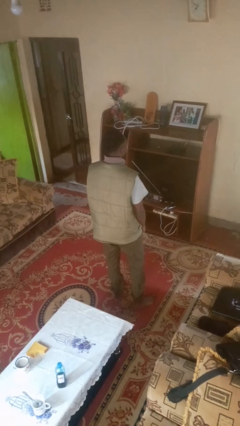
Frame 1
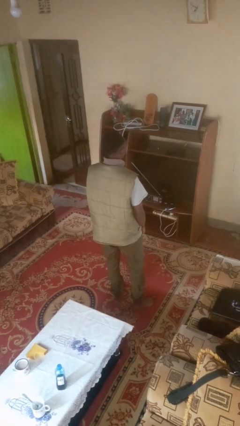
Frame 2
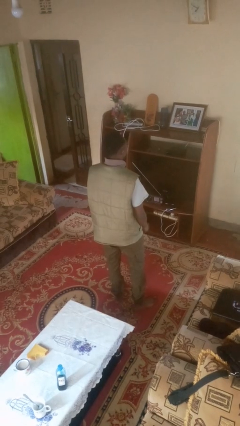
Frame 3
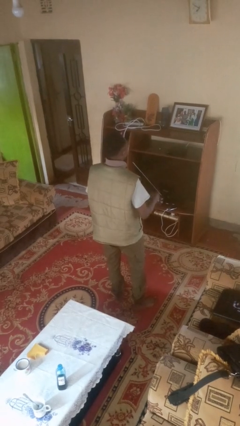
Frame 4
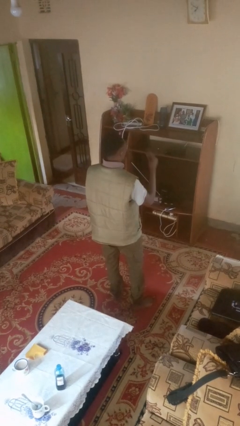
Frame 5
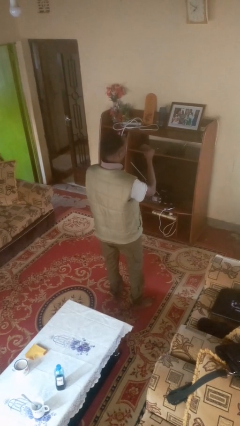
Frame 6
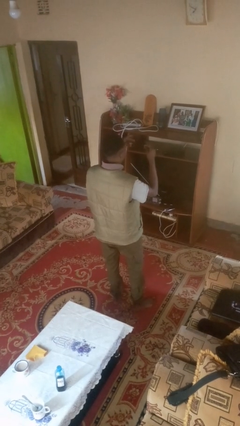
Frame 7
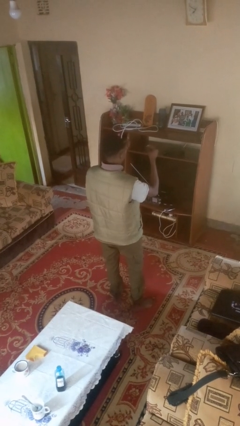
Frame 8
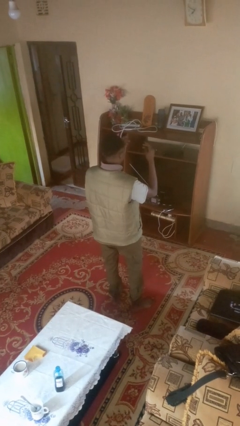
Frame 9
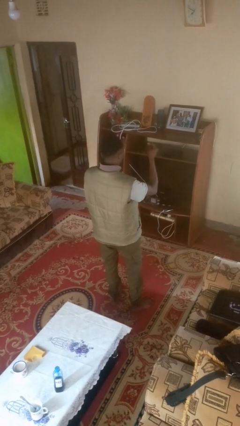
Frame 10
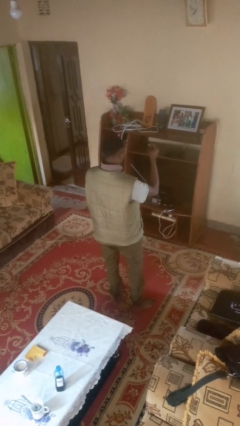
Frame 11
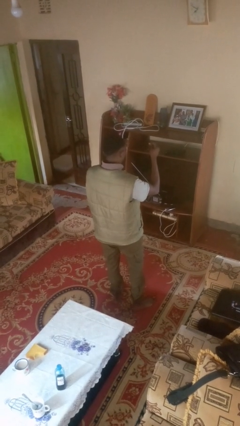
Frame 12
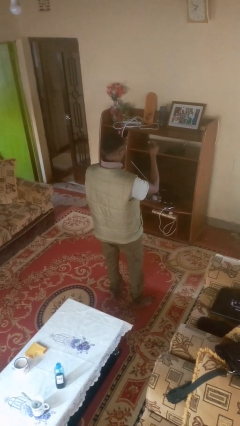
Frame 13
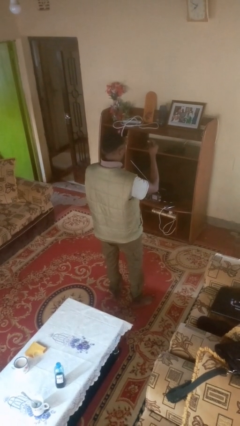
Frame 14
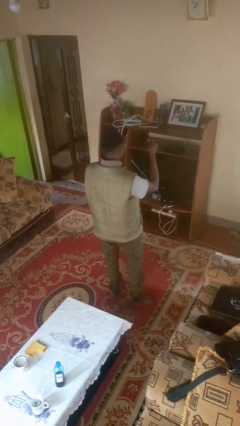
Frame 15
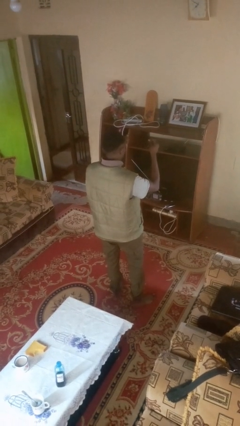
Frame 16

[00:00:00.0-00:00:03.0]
person snaps fingers

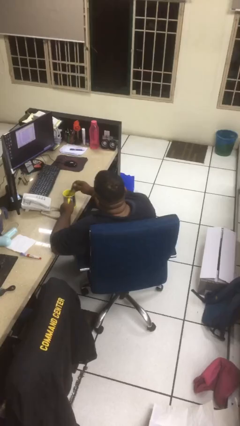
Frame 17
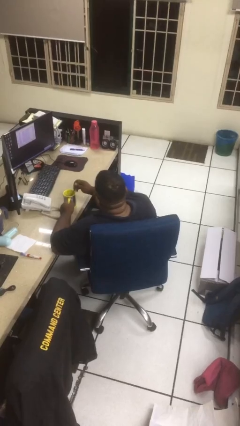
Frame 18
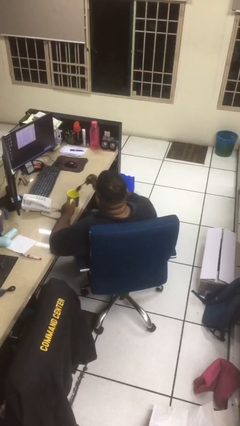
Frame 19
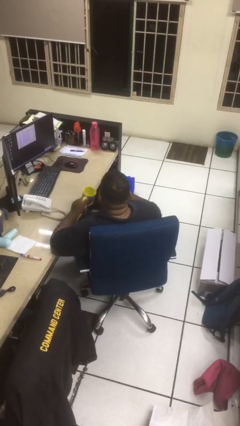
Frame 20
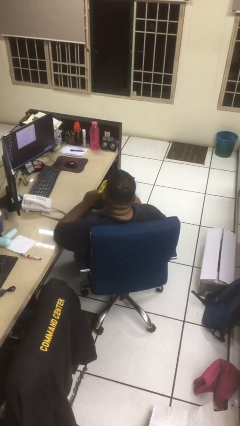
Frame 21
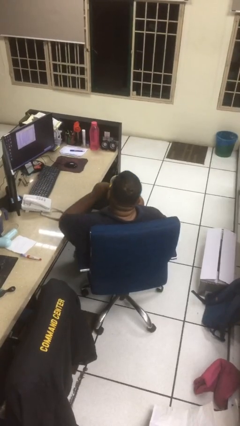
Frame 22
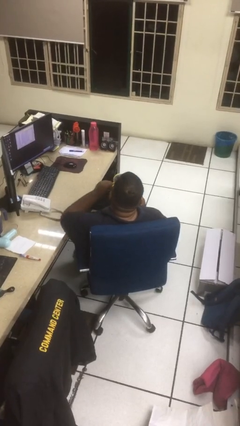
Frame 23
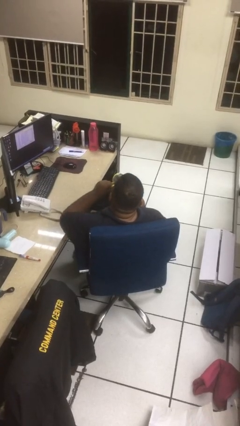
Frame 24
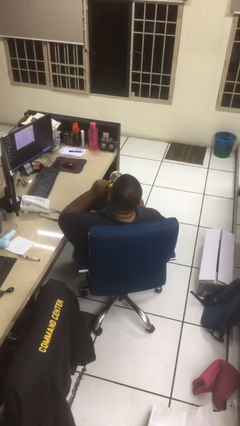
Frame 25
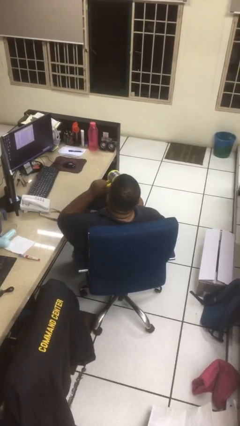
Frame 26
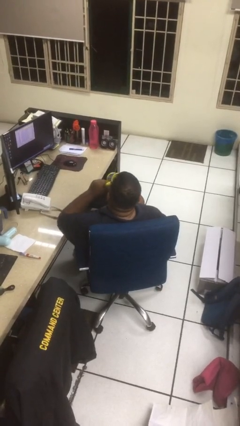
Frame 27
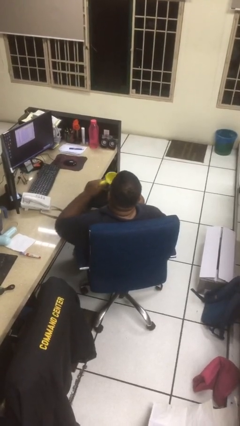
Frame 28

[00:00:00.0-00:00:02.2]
person drinks from mug

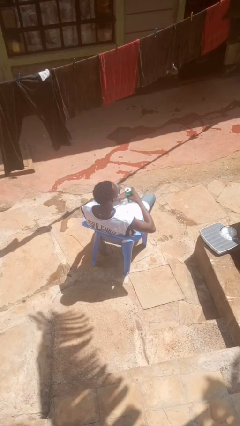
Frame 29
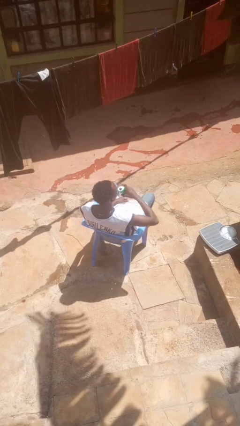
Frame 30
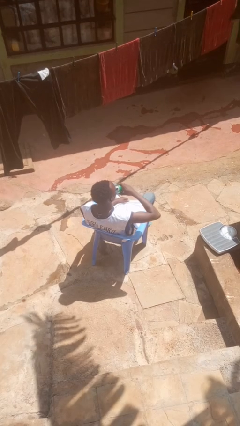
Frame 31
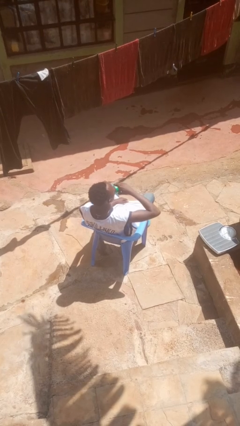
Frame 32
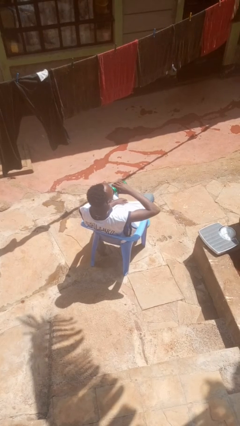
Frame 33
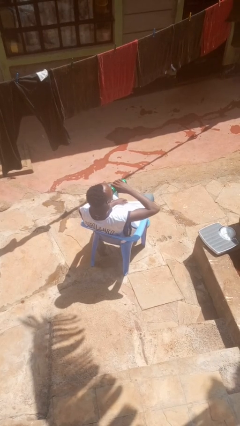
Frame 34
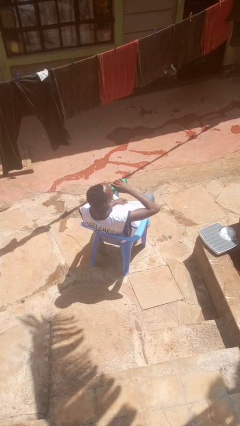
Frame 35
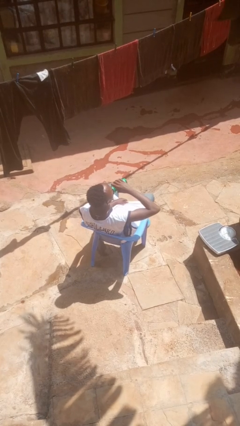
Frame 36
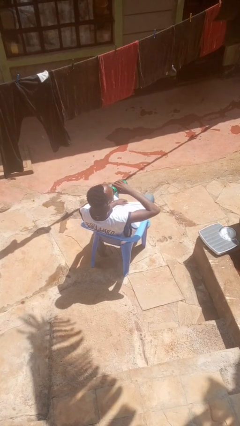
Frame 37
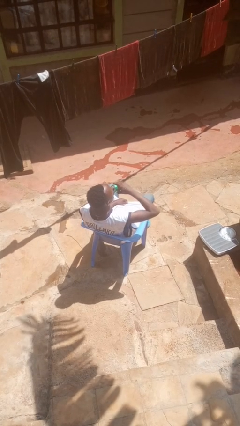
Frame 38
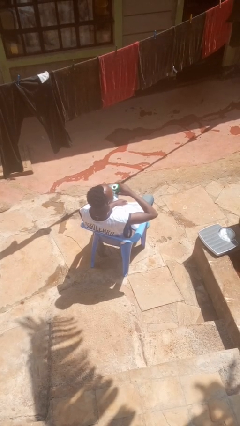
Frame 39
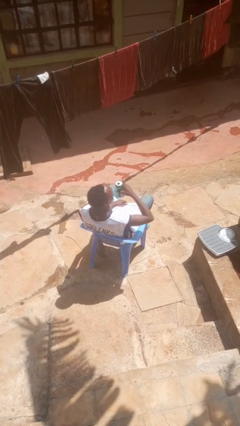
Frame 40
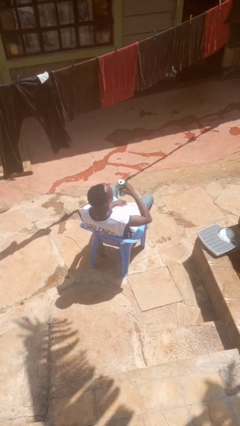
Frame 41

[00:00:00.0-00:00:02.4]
person drinks from beverage can

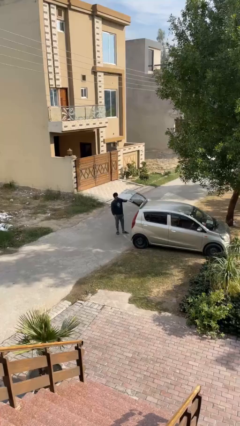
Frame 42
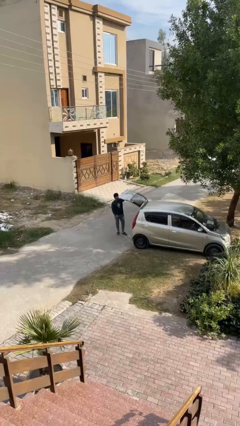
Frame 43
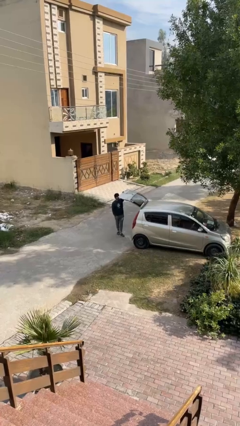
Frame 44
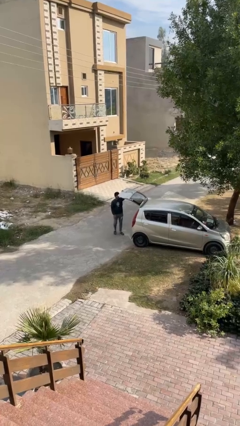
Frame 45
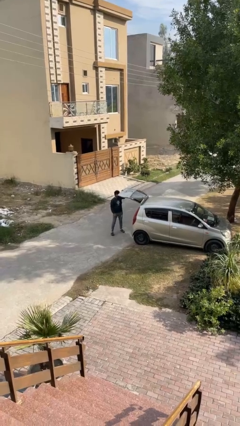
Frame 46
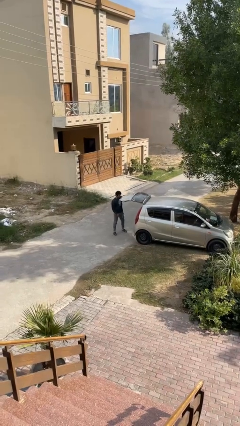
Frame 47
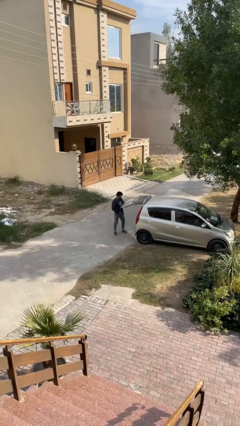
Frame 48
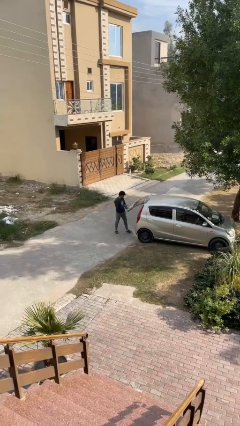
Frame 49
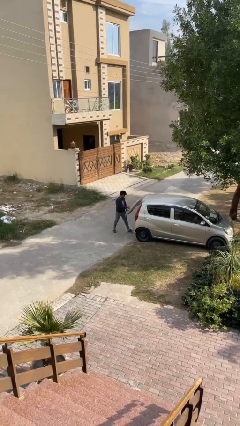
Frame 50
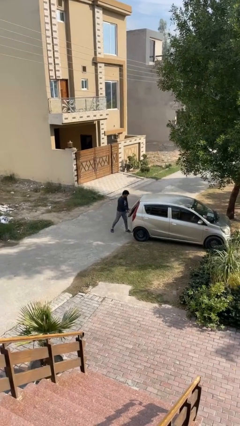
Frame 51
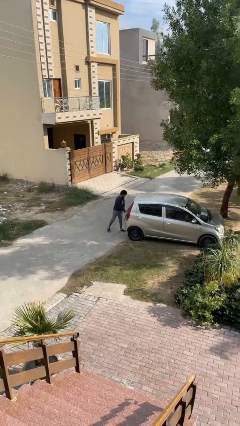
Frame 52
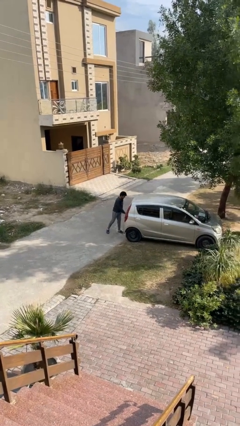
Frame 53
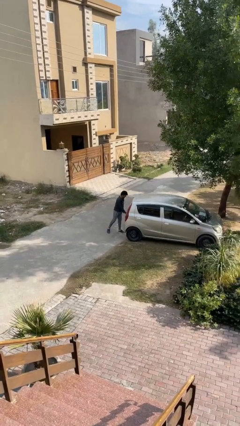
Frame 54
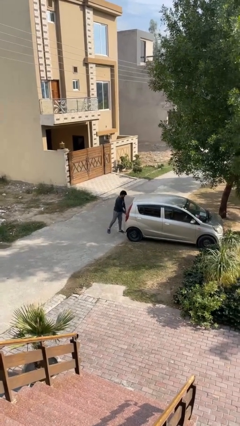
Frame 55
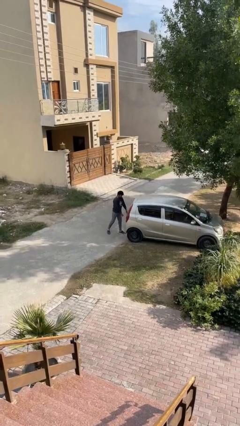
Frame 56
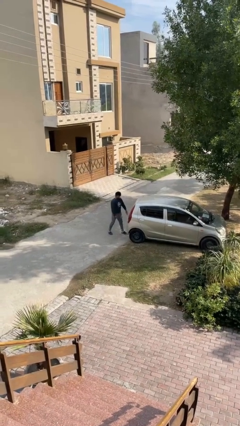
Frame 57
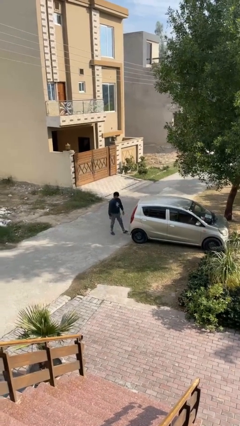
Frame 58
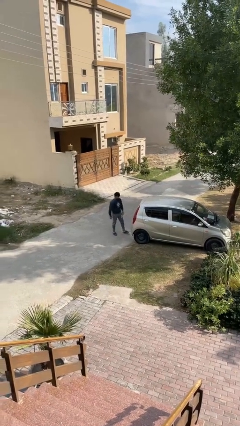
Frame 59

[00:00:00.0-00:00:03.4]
person closes car trunk

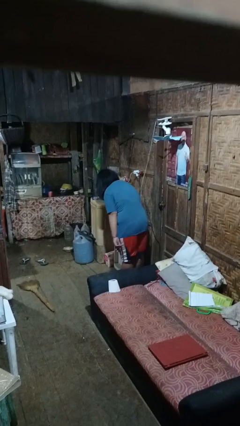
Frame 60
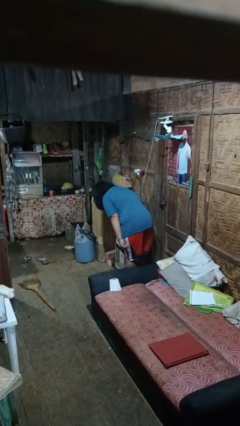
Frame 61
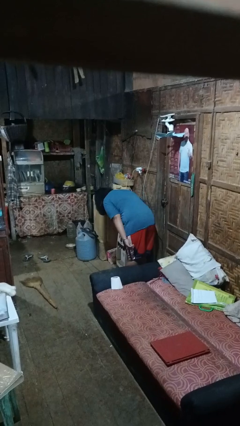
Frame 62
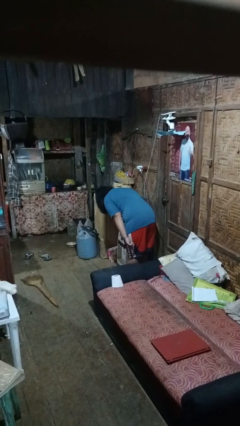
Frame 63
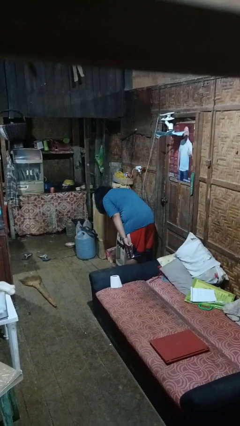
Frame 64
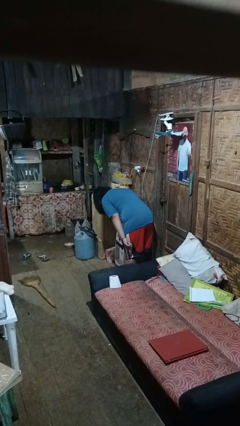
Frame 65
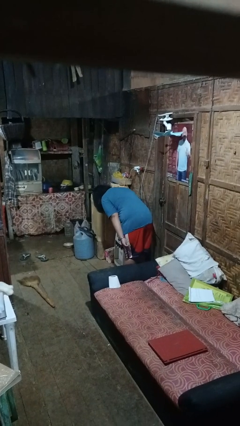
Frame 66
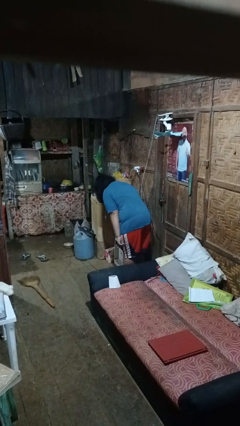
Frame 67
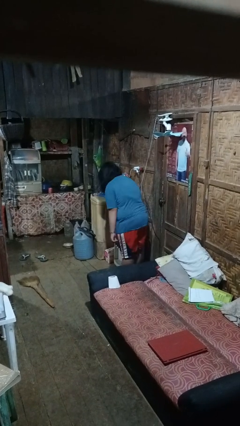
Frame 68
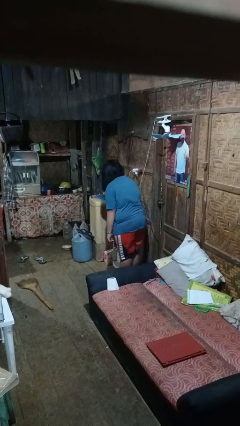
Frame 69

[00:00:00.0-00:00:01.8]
person bows

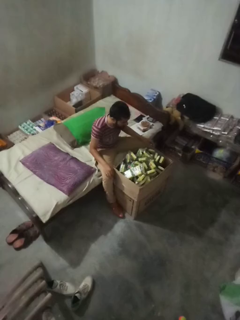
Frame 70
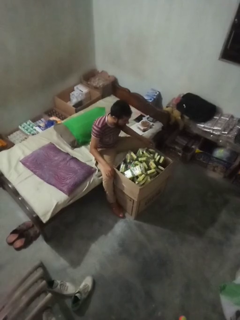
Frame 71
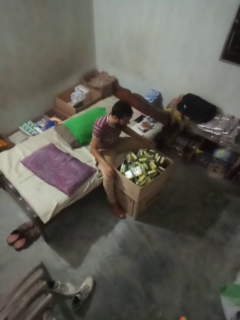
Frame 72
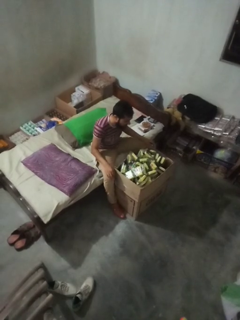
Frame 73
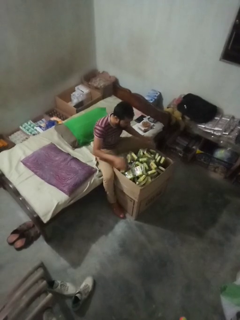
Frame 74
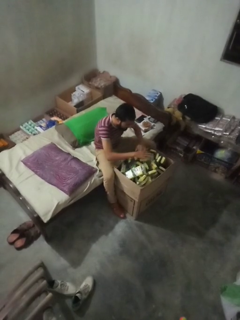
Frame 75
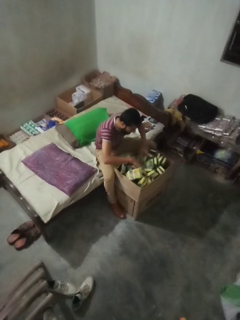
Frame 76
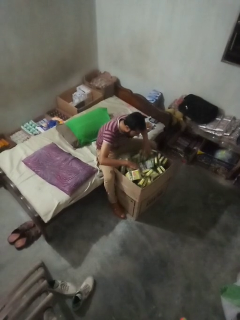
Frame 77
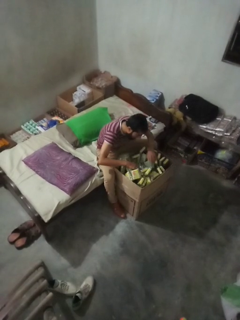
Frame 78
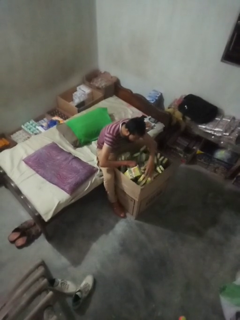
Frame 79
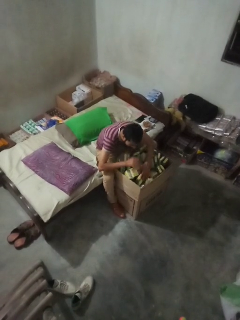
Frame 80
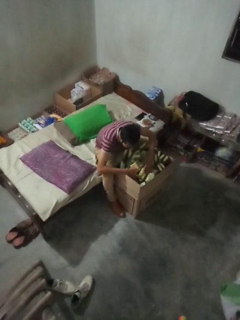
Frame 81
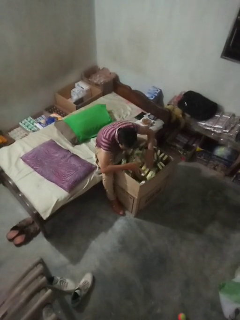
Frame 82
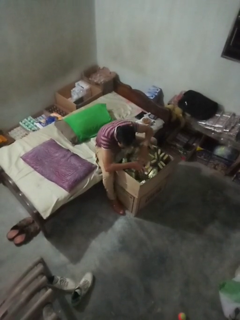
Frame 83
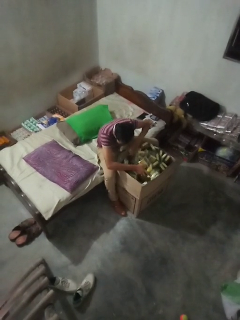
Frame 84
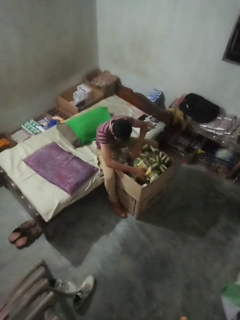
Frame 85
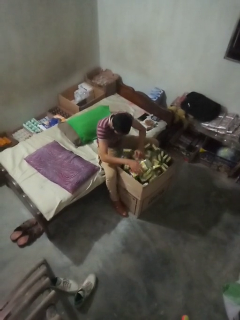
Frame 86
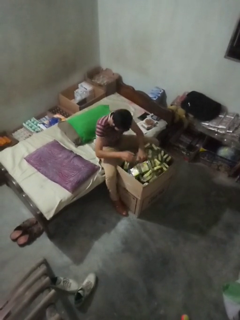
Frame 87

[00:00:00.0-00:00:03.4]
person searches in box

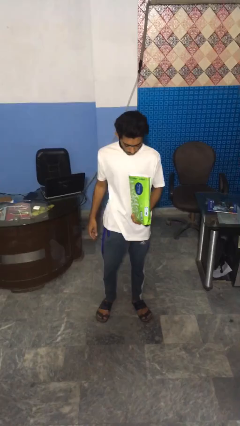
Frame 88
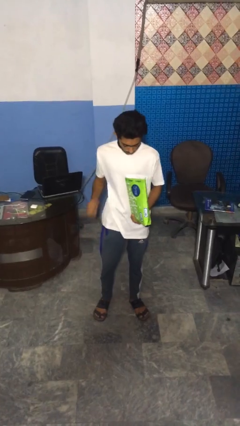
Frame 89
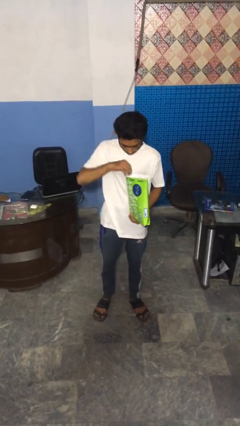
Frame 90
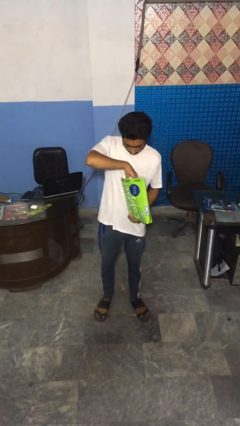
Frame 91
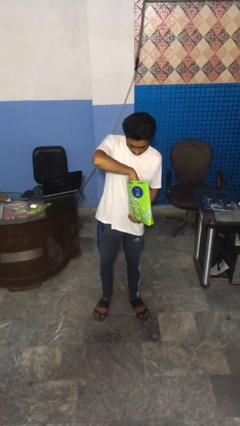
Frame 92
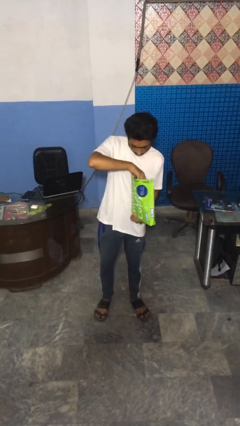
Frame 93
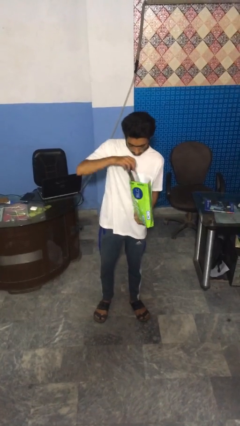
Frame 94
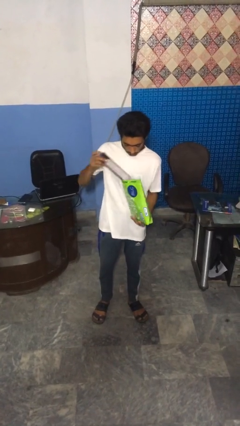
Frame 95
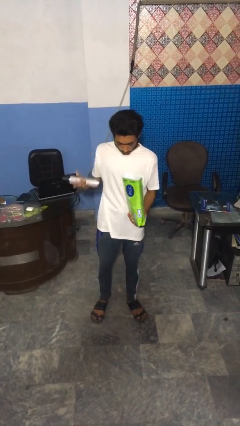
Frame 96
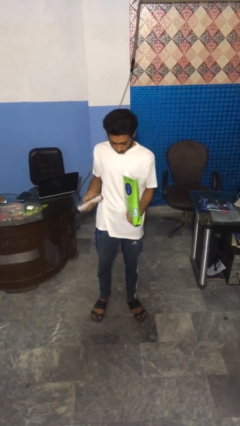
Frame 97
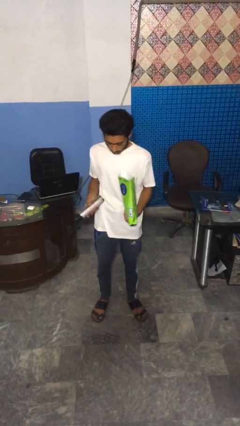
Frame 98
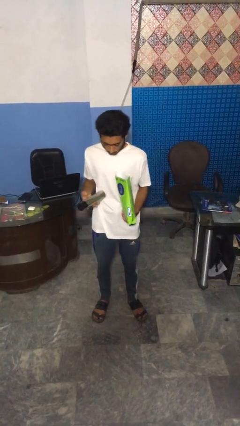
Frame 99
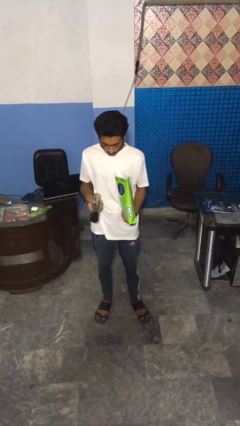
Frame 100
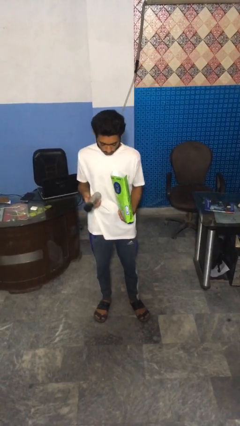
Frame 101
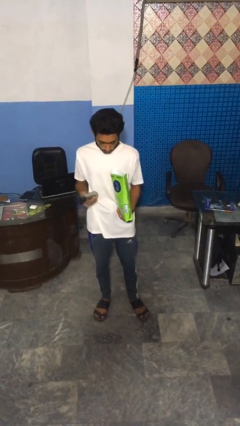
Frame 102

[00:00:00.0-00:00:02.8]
person takes object from bag
